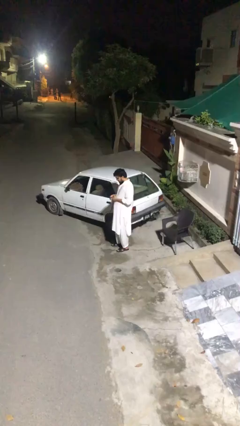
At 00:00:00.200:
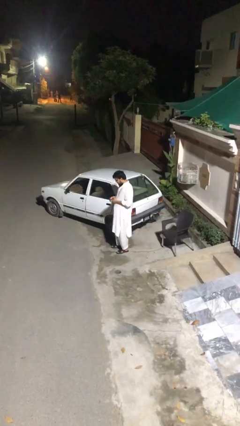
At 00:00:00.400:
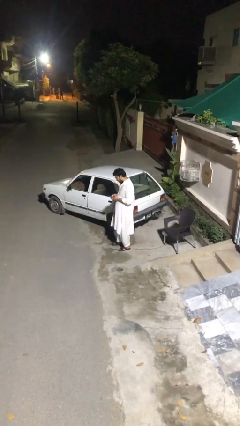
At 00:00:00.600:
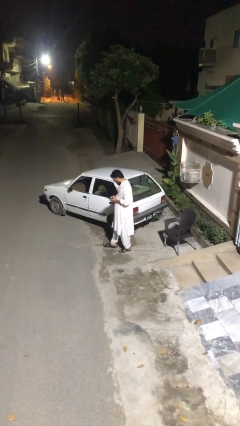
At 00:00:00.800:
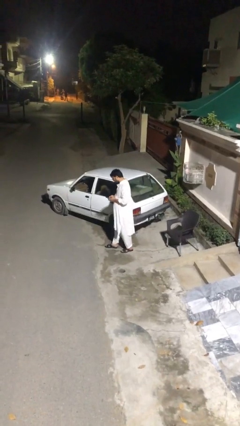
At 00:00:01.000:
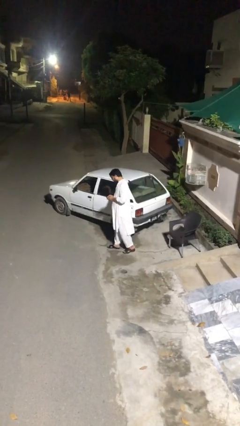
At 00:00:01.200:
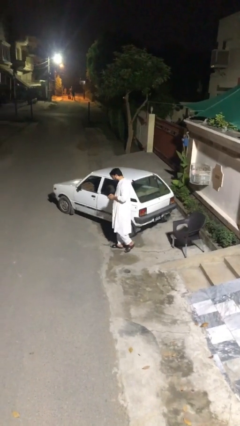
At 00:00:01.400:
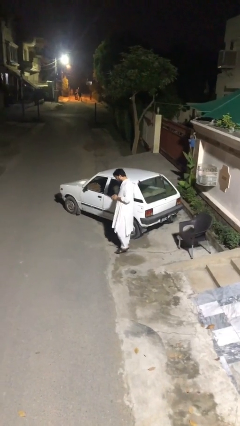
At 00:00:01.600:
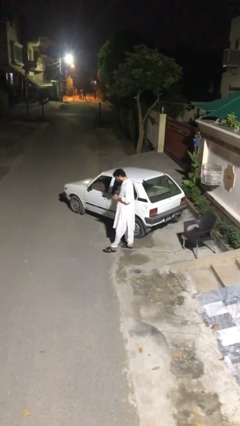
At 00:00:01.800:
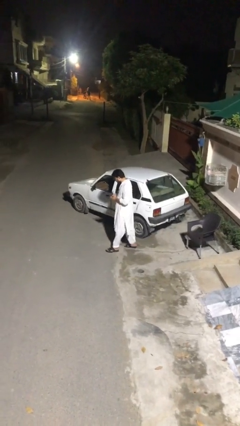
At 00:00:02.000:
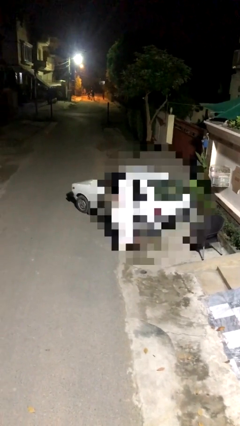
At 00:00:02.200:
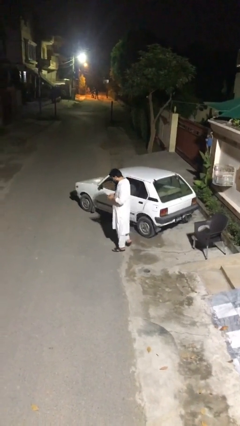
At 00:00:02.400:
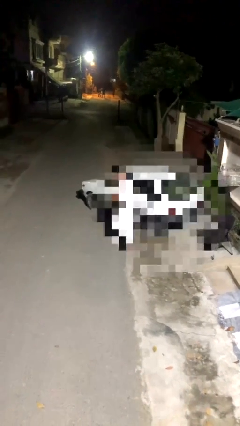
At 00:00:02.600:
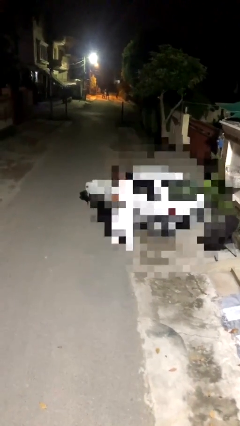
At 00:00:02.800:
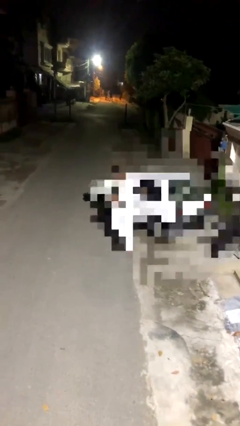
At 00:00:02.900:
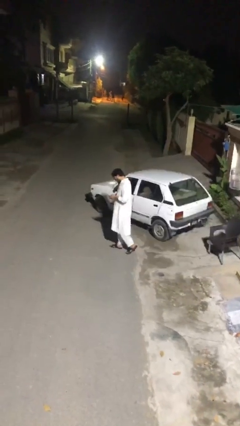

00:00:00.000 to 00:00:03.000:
person texts on phone

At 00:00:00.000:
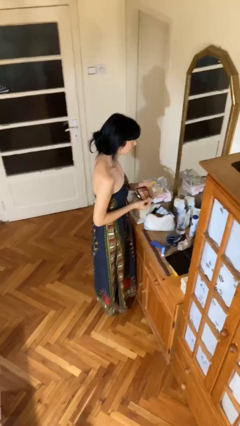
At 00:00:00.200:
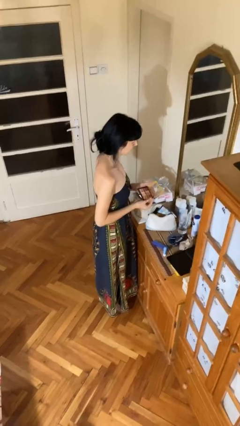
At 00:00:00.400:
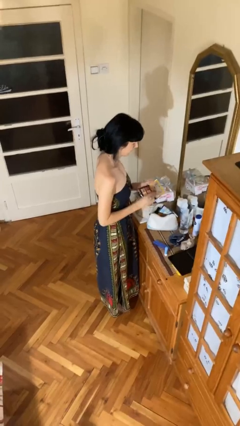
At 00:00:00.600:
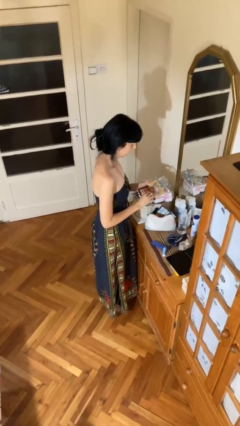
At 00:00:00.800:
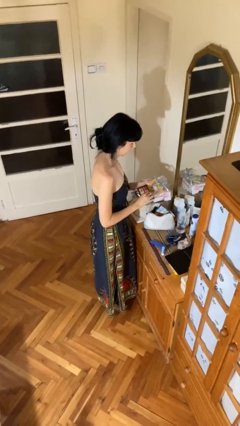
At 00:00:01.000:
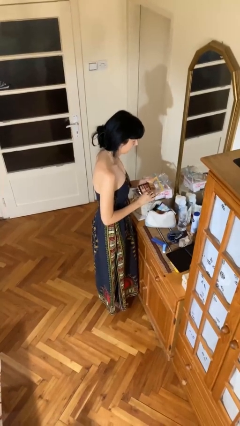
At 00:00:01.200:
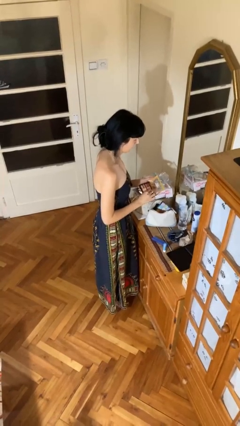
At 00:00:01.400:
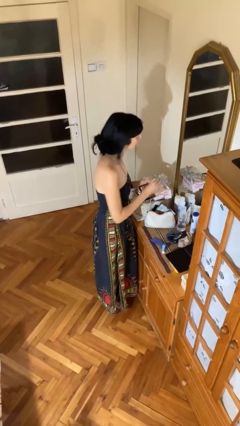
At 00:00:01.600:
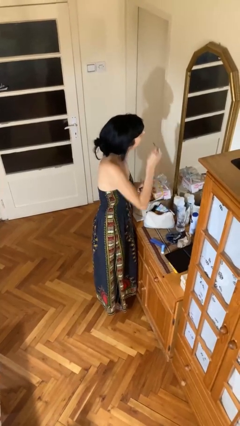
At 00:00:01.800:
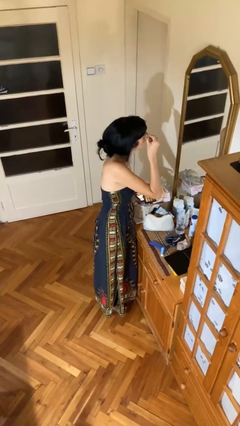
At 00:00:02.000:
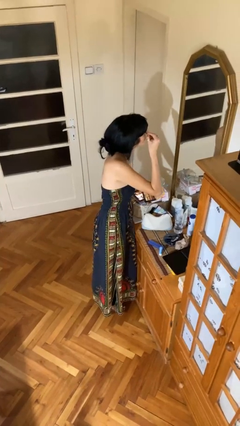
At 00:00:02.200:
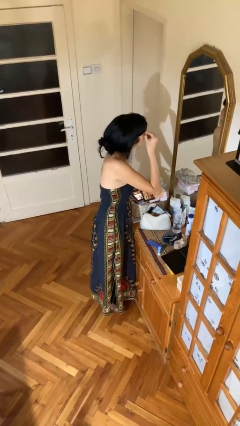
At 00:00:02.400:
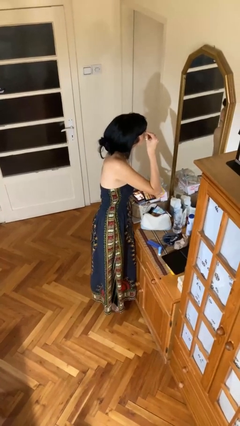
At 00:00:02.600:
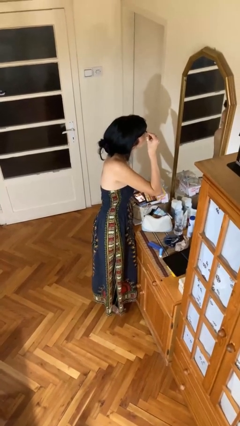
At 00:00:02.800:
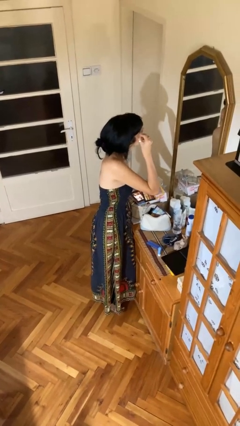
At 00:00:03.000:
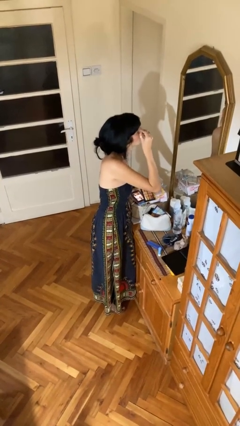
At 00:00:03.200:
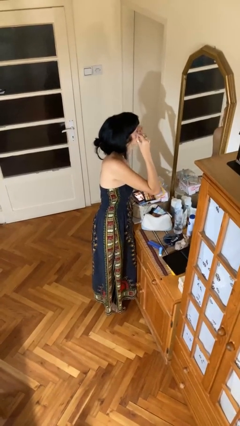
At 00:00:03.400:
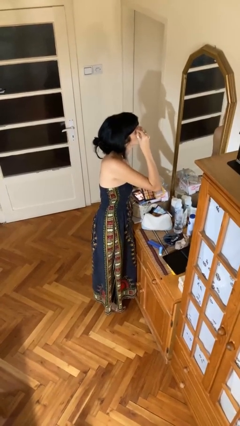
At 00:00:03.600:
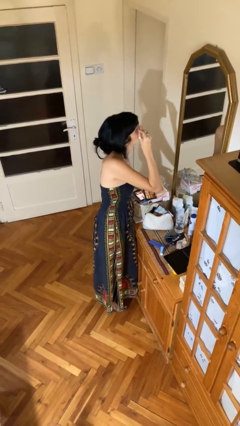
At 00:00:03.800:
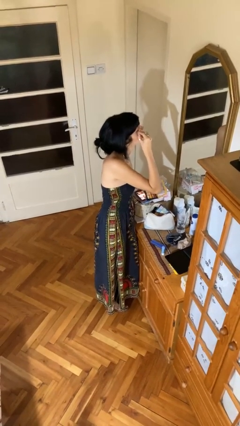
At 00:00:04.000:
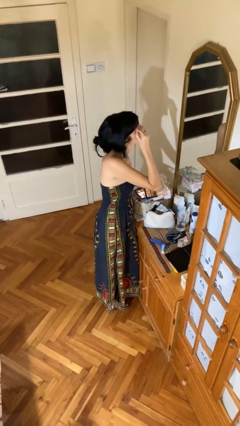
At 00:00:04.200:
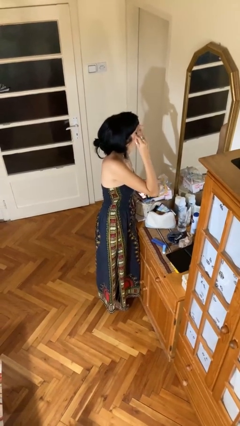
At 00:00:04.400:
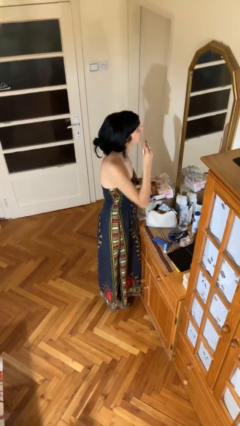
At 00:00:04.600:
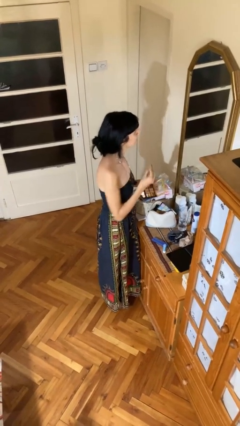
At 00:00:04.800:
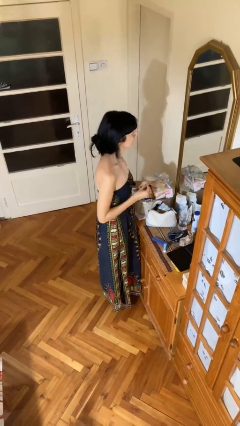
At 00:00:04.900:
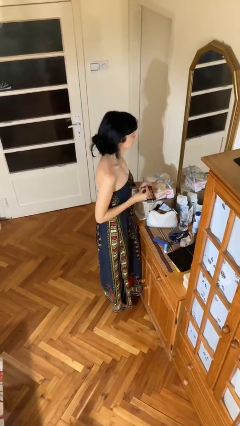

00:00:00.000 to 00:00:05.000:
person applies eye makeup

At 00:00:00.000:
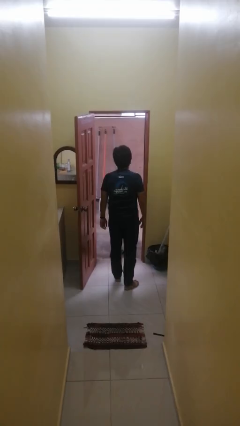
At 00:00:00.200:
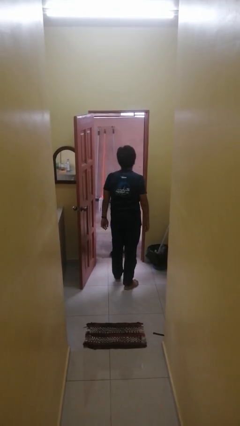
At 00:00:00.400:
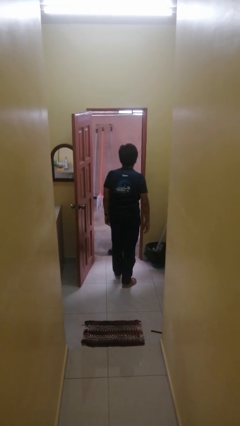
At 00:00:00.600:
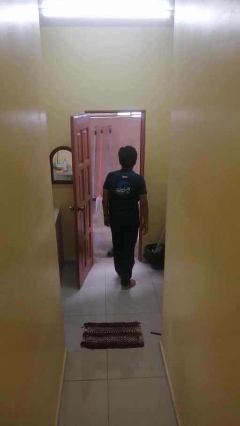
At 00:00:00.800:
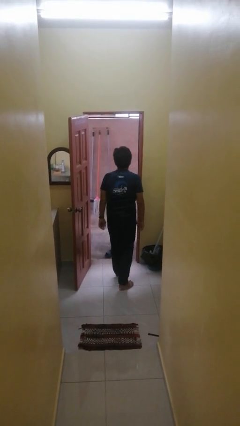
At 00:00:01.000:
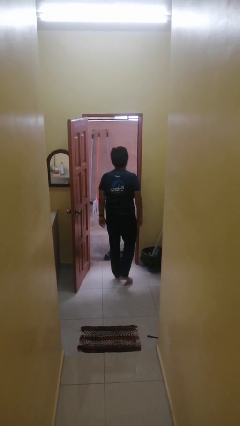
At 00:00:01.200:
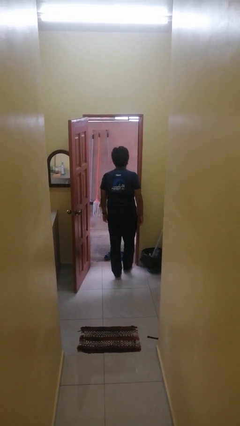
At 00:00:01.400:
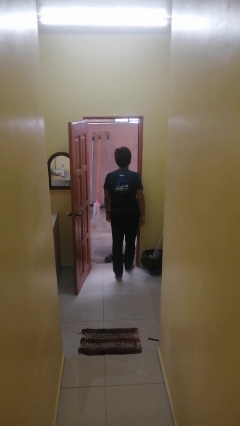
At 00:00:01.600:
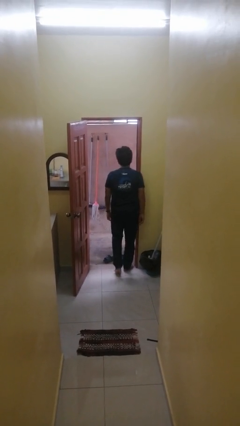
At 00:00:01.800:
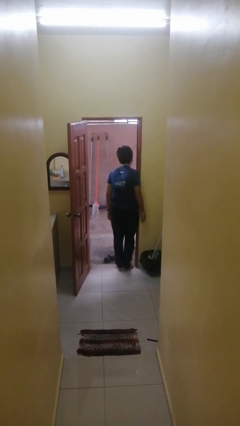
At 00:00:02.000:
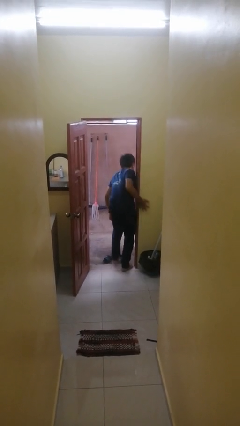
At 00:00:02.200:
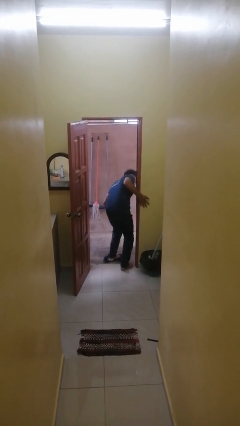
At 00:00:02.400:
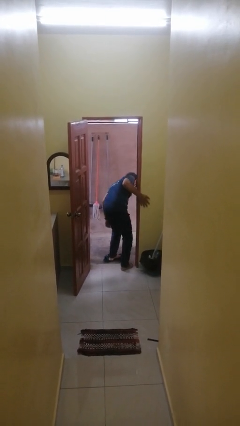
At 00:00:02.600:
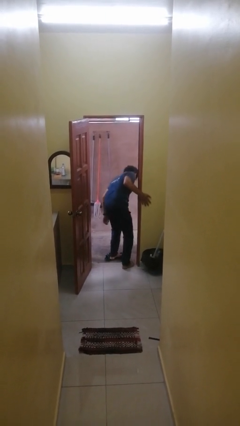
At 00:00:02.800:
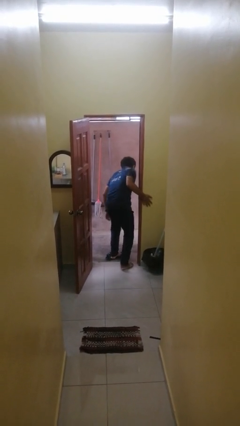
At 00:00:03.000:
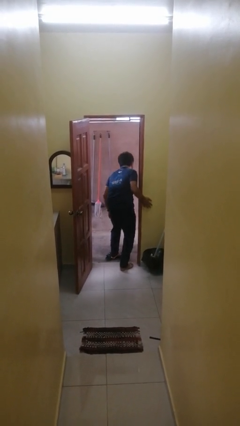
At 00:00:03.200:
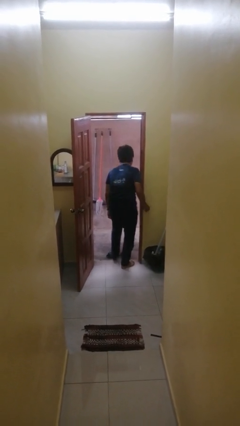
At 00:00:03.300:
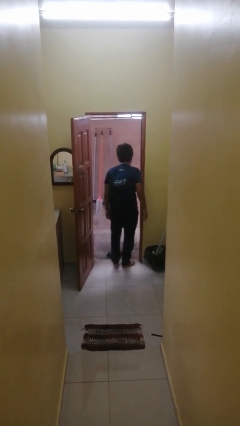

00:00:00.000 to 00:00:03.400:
person bumps into wall

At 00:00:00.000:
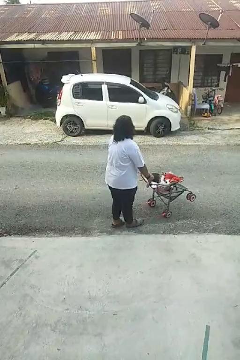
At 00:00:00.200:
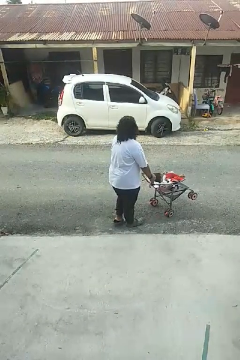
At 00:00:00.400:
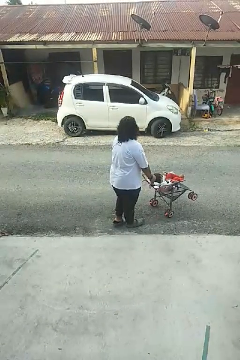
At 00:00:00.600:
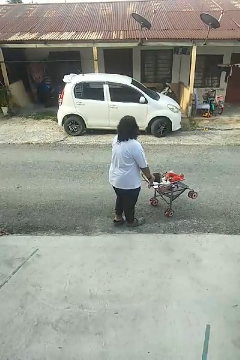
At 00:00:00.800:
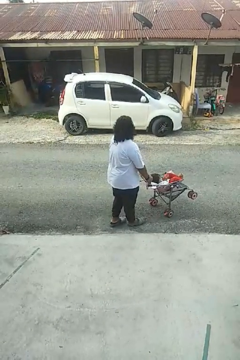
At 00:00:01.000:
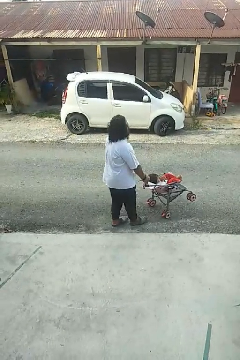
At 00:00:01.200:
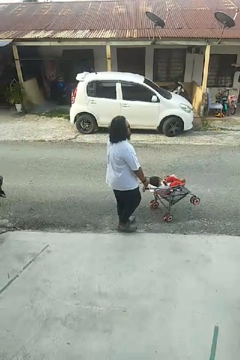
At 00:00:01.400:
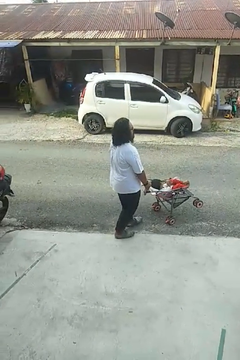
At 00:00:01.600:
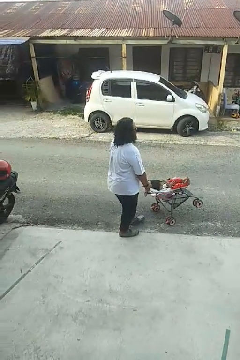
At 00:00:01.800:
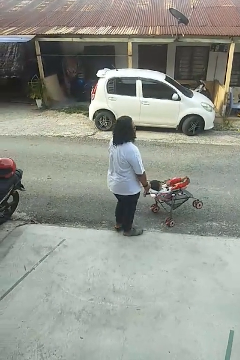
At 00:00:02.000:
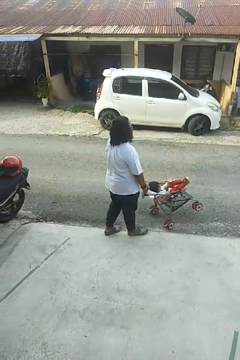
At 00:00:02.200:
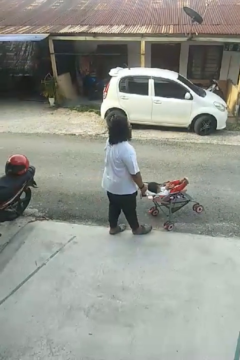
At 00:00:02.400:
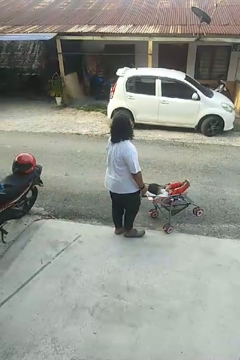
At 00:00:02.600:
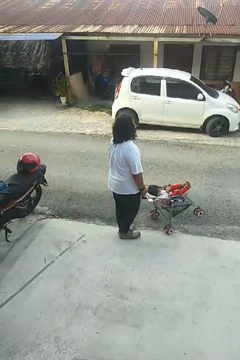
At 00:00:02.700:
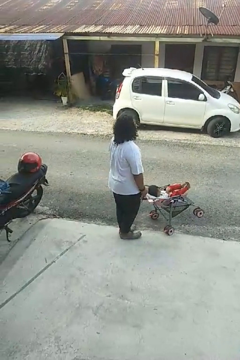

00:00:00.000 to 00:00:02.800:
person pulls wheeled cart

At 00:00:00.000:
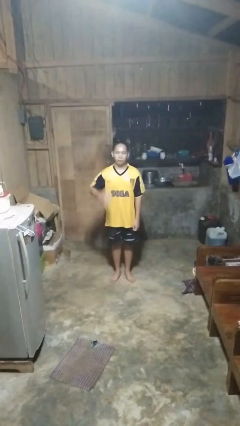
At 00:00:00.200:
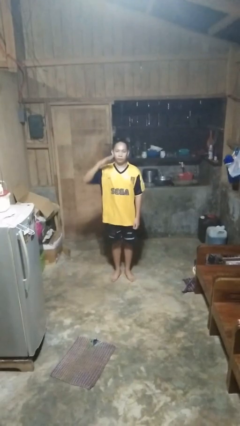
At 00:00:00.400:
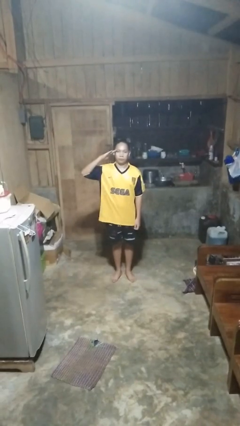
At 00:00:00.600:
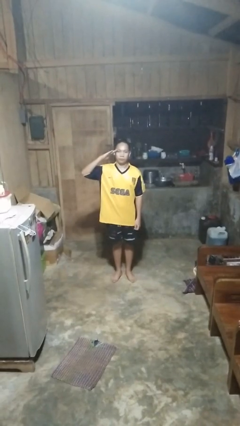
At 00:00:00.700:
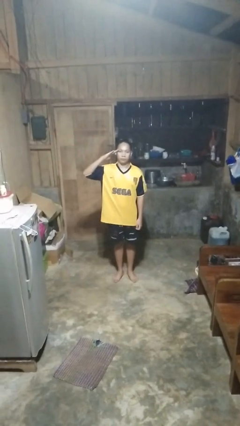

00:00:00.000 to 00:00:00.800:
person salutes

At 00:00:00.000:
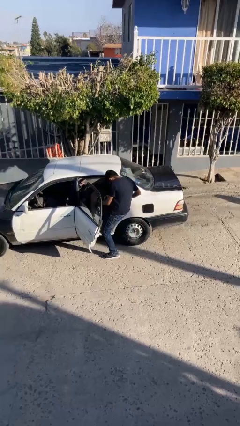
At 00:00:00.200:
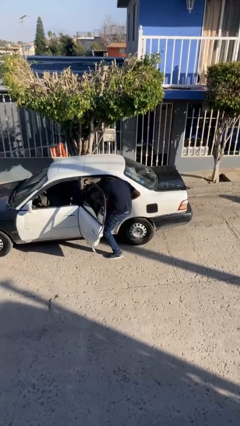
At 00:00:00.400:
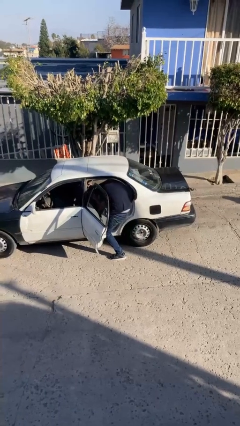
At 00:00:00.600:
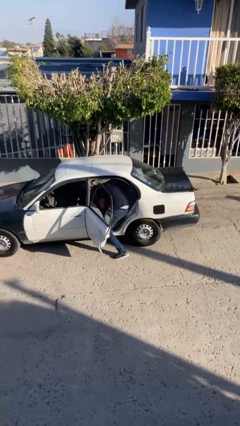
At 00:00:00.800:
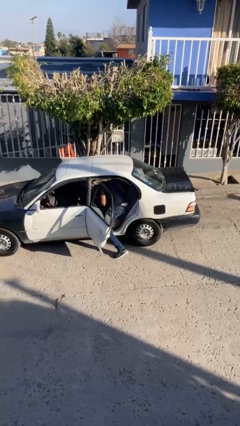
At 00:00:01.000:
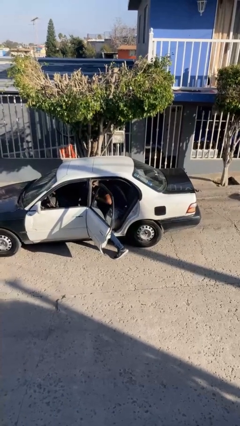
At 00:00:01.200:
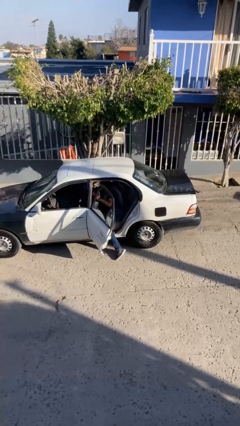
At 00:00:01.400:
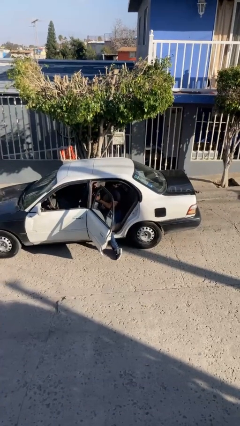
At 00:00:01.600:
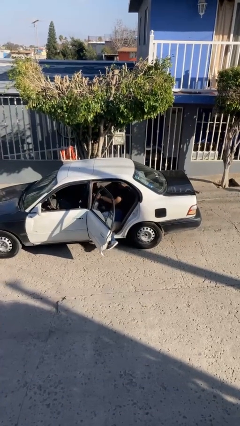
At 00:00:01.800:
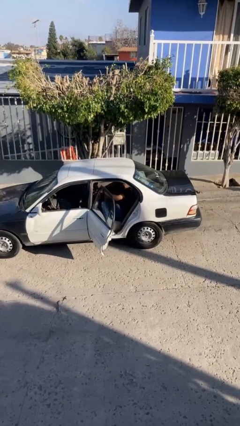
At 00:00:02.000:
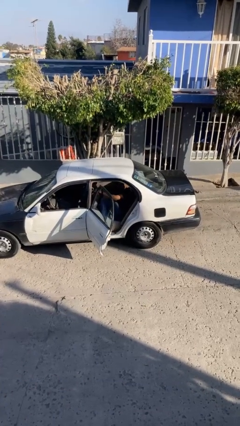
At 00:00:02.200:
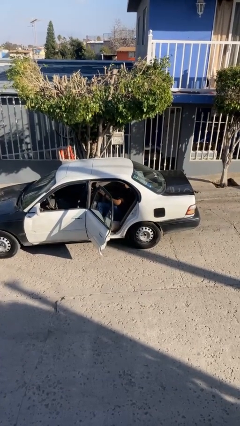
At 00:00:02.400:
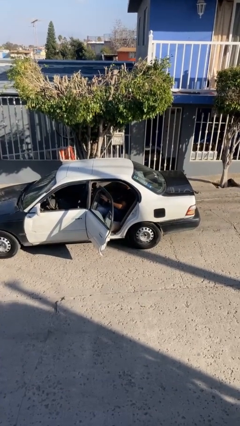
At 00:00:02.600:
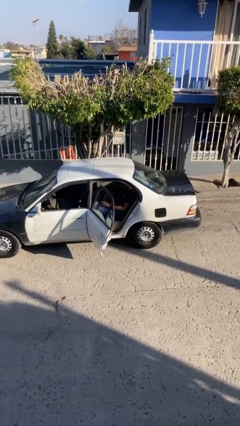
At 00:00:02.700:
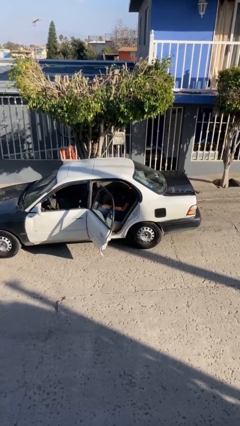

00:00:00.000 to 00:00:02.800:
person enters car
